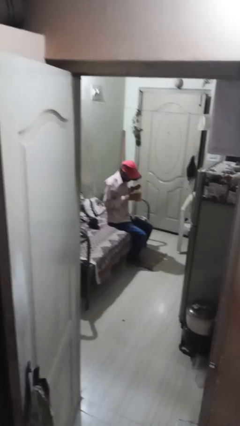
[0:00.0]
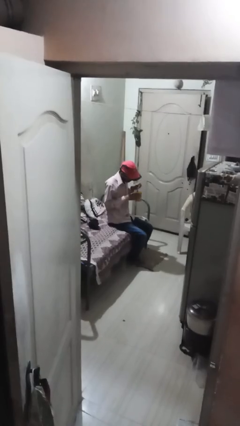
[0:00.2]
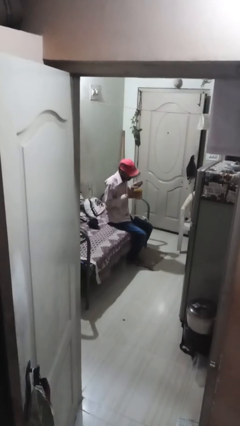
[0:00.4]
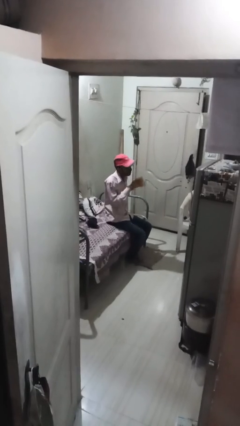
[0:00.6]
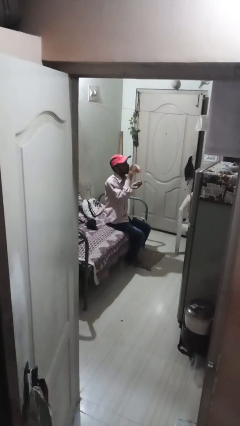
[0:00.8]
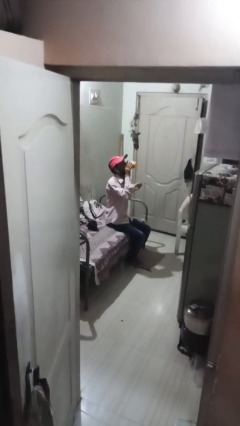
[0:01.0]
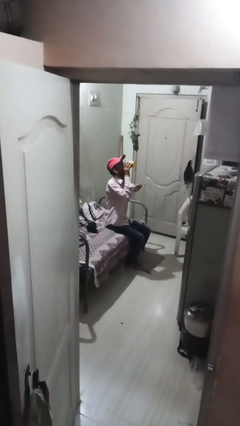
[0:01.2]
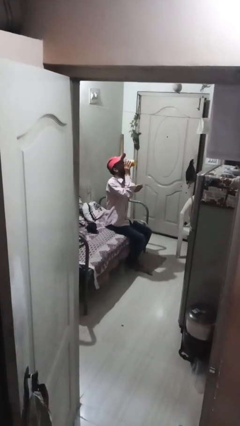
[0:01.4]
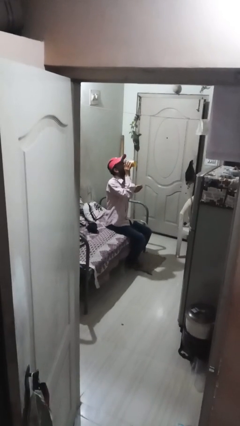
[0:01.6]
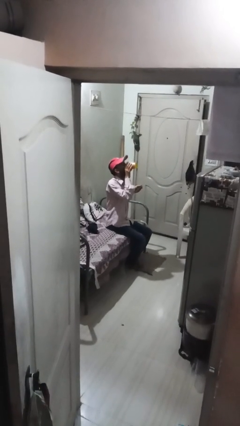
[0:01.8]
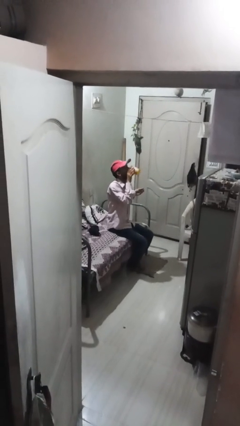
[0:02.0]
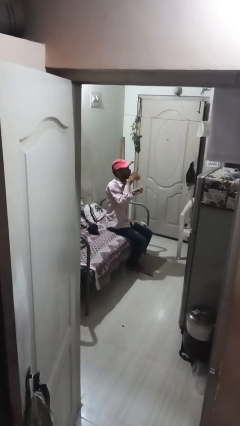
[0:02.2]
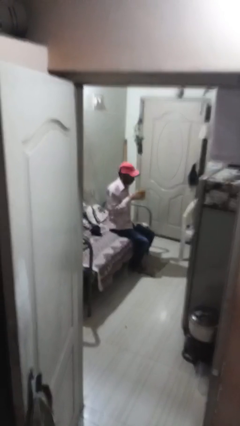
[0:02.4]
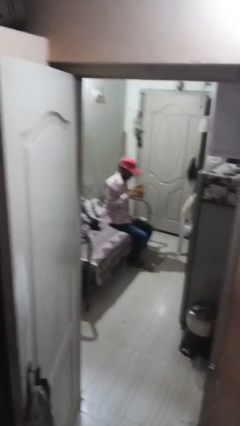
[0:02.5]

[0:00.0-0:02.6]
person drinks from mug

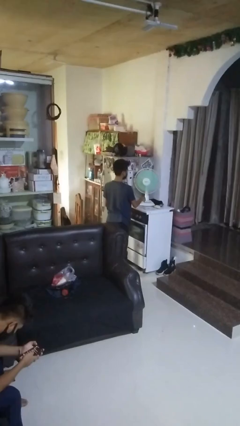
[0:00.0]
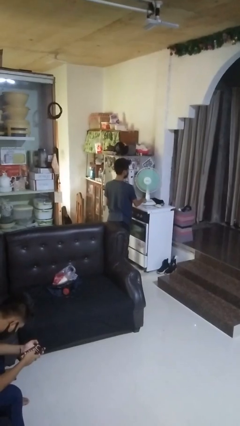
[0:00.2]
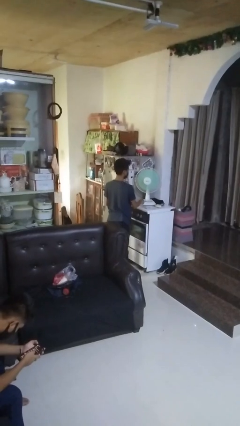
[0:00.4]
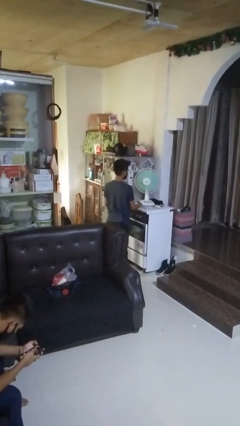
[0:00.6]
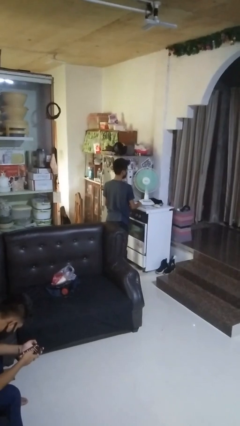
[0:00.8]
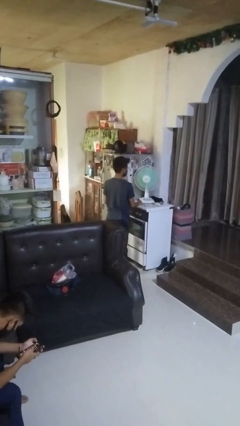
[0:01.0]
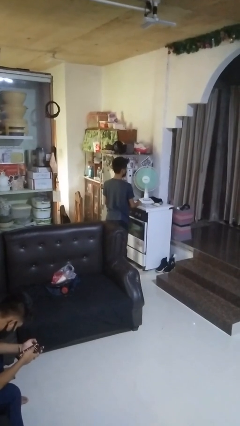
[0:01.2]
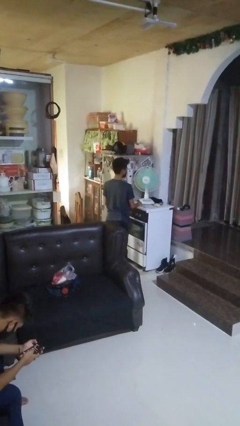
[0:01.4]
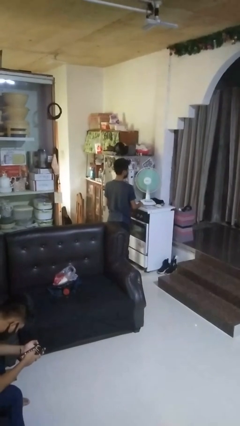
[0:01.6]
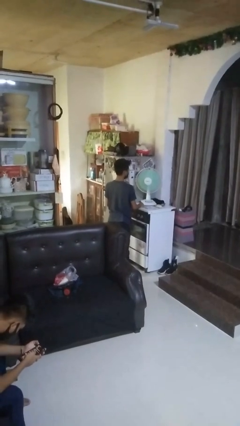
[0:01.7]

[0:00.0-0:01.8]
person turns off fan

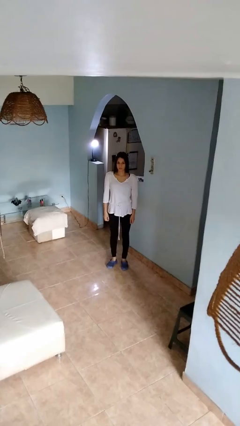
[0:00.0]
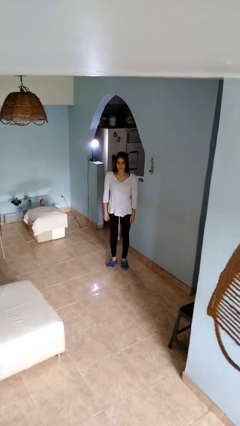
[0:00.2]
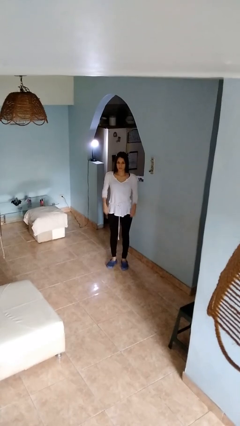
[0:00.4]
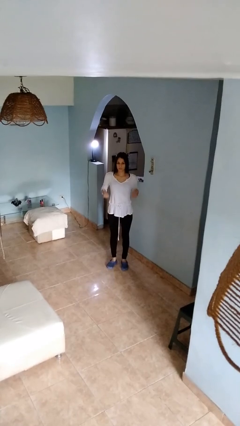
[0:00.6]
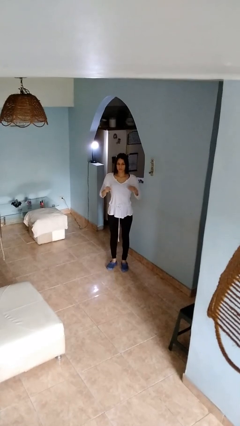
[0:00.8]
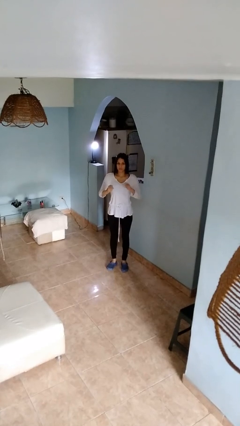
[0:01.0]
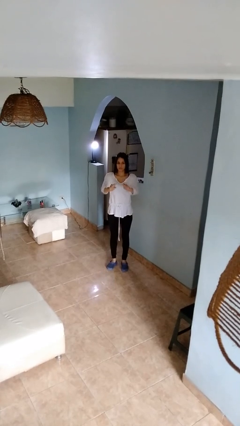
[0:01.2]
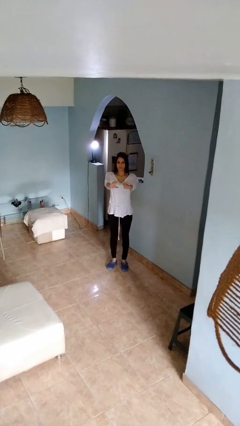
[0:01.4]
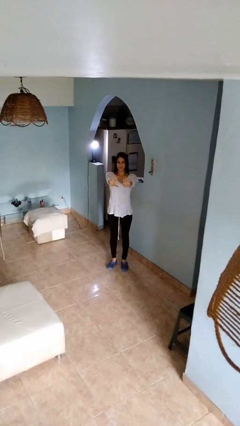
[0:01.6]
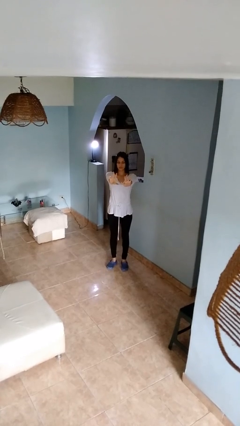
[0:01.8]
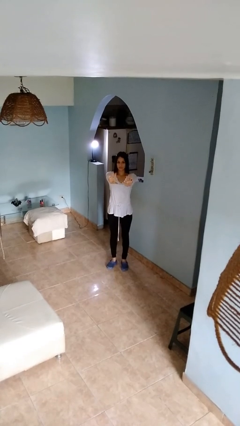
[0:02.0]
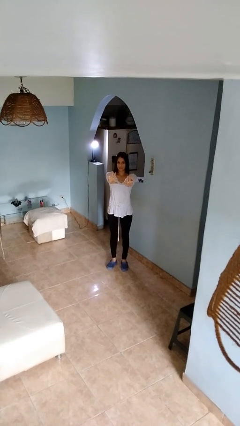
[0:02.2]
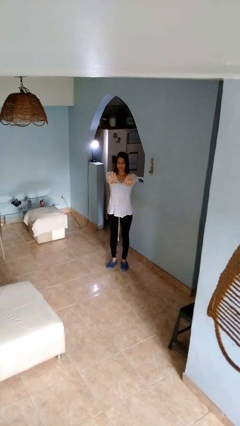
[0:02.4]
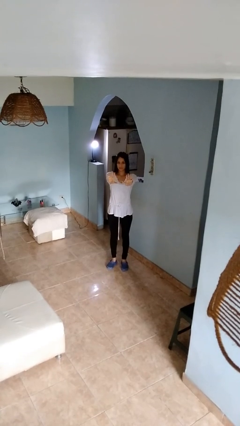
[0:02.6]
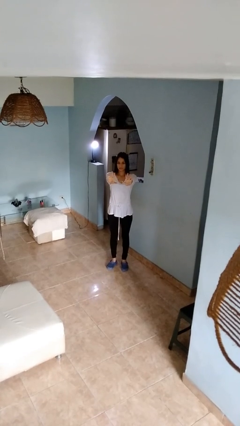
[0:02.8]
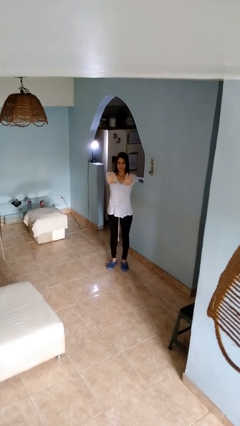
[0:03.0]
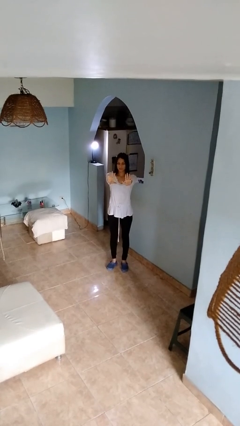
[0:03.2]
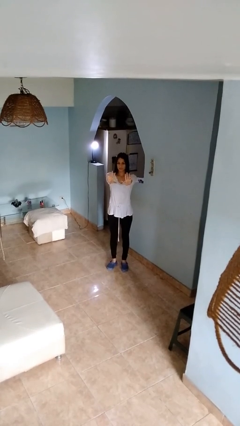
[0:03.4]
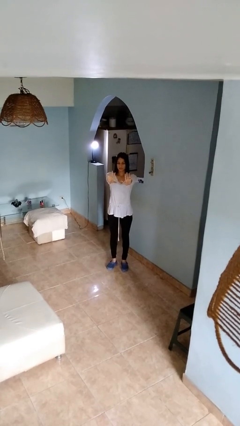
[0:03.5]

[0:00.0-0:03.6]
person gestures zoom in

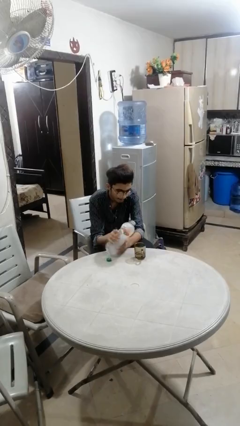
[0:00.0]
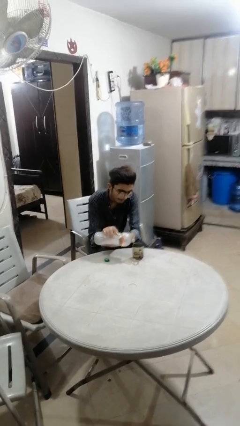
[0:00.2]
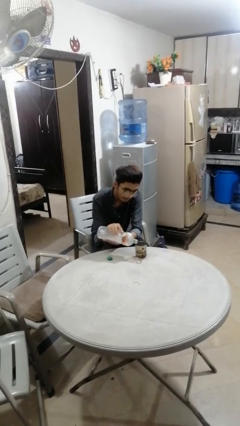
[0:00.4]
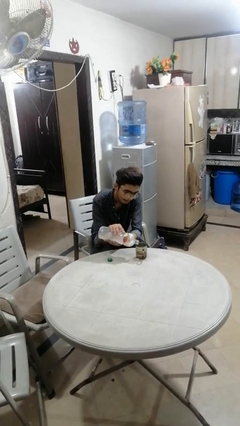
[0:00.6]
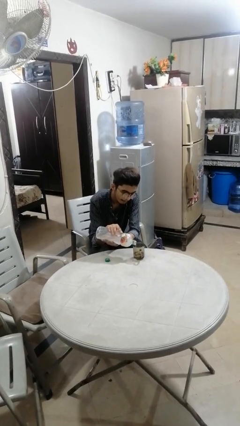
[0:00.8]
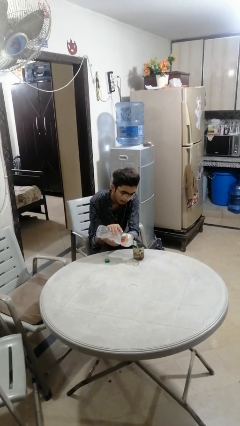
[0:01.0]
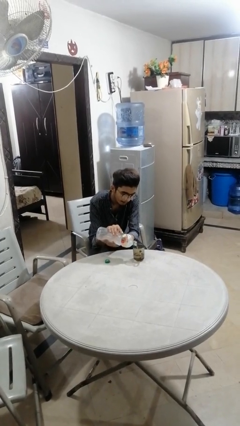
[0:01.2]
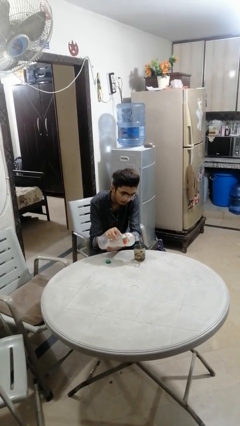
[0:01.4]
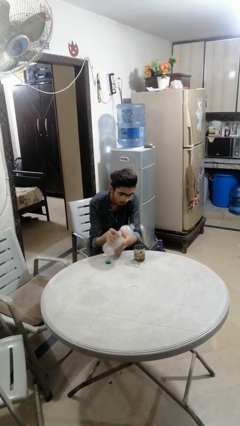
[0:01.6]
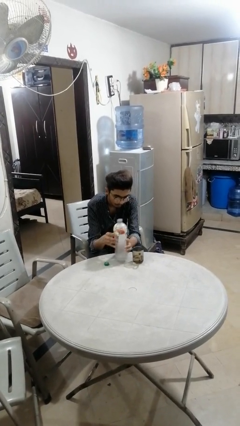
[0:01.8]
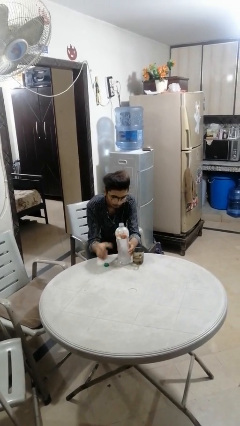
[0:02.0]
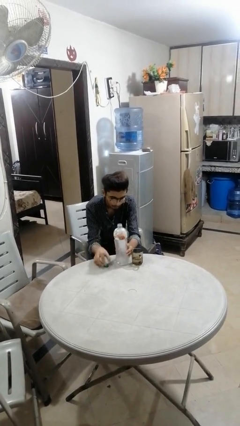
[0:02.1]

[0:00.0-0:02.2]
person pours liquid into cup

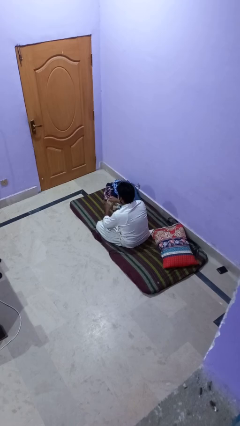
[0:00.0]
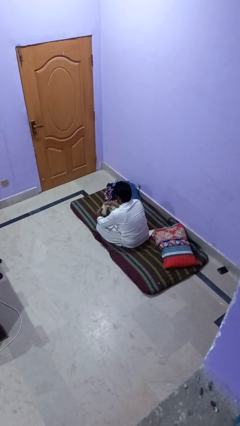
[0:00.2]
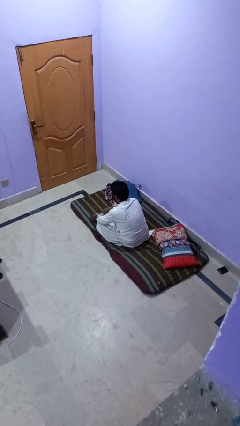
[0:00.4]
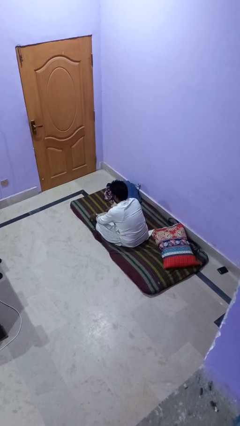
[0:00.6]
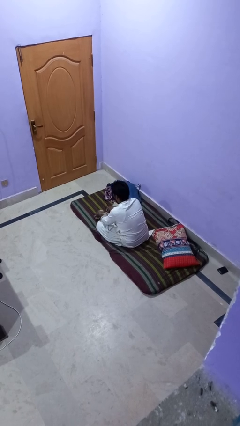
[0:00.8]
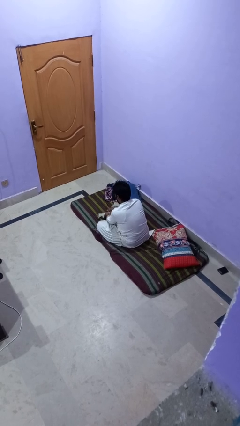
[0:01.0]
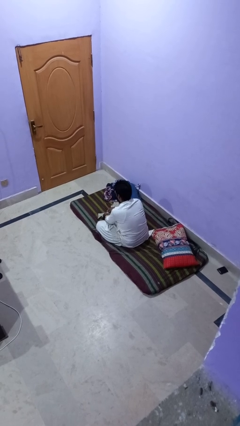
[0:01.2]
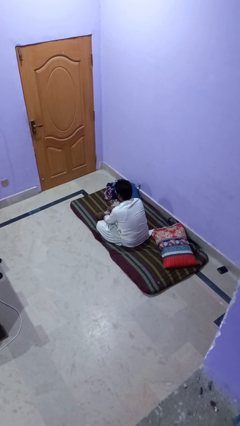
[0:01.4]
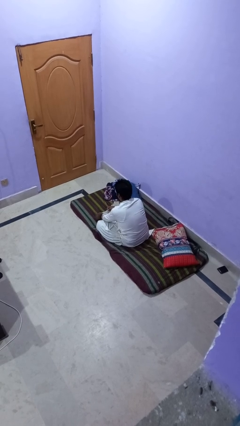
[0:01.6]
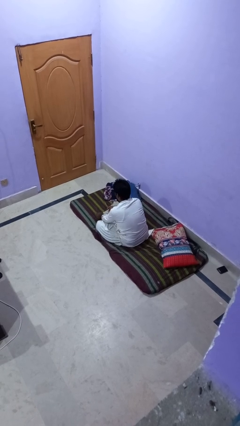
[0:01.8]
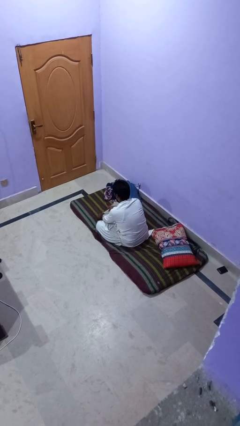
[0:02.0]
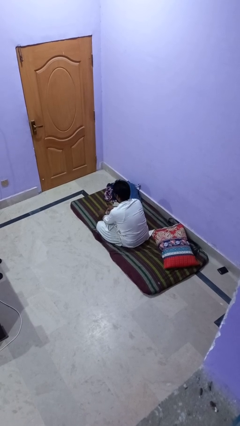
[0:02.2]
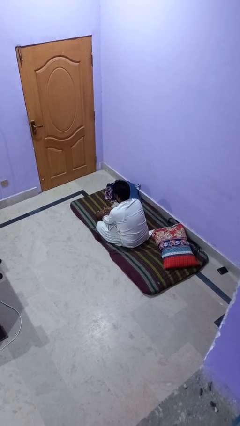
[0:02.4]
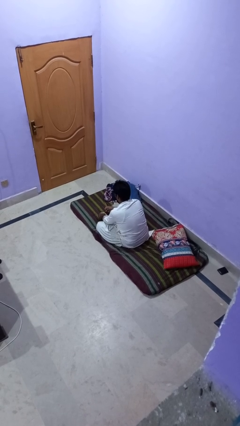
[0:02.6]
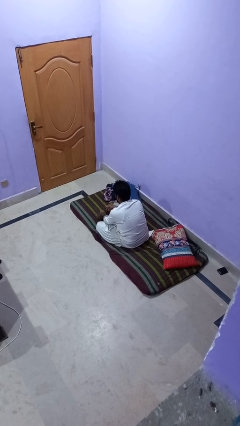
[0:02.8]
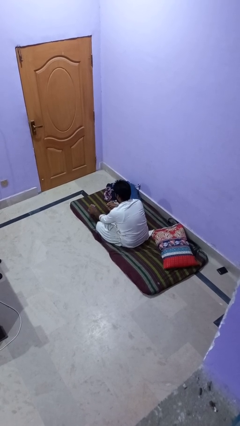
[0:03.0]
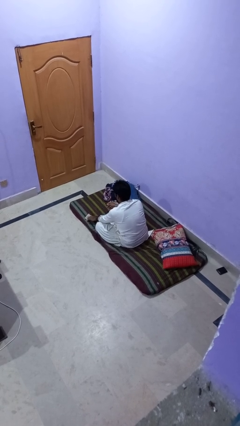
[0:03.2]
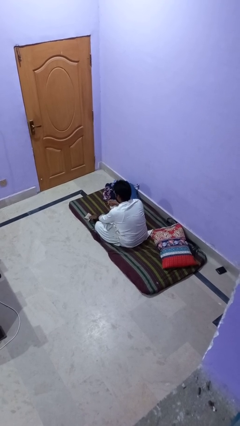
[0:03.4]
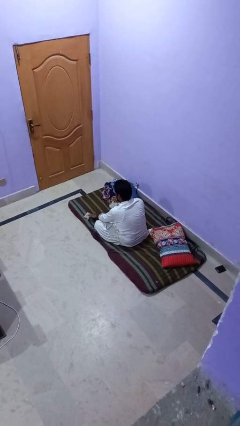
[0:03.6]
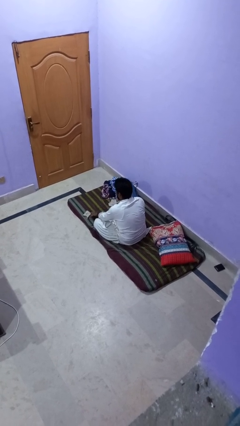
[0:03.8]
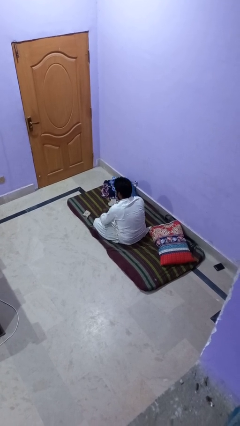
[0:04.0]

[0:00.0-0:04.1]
person folds socks

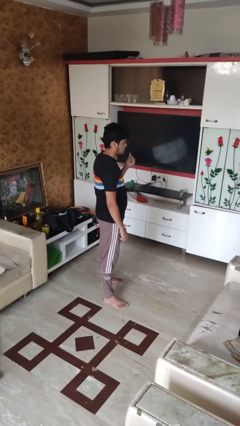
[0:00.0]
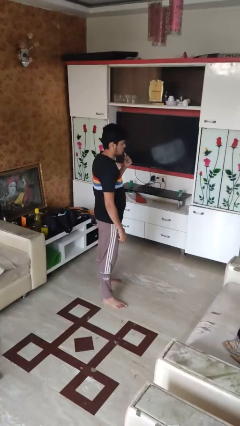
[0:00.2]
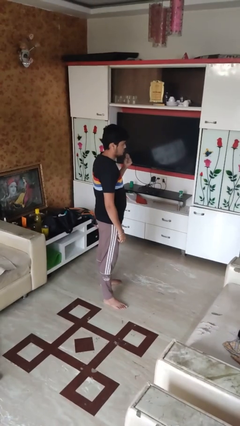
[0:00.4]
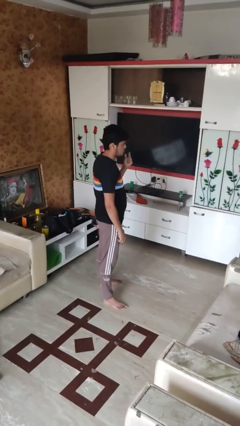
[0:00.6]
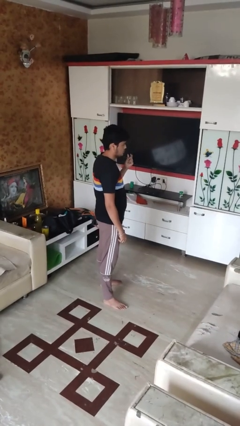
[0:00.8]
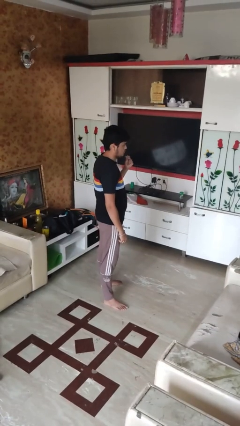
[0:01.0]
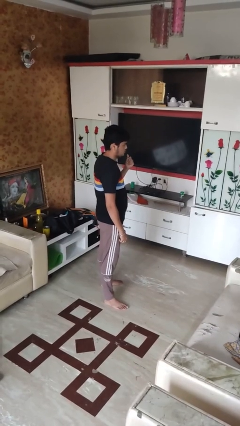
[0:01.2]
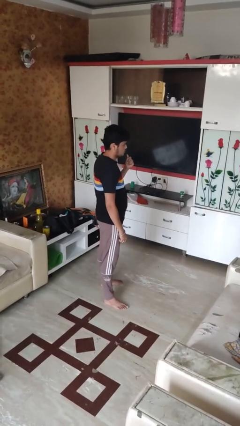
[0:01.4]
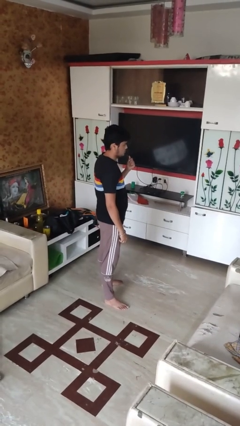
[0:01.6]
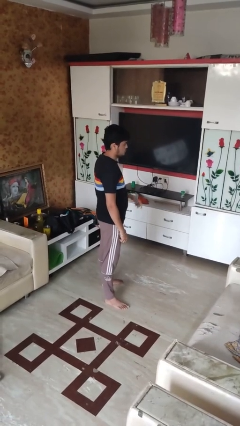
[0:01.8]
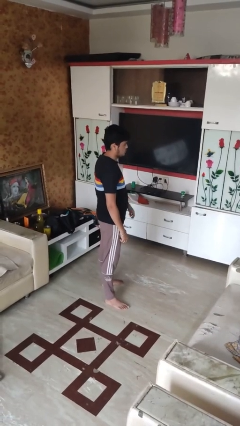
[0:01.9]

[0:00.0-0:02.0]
person snaps fingers

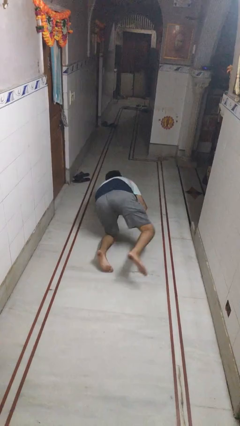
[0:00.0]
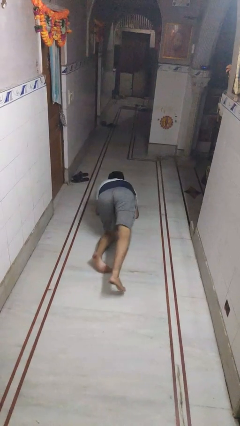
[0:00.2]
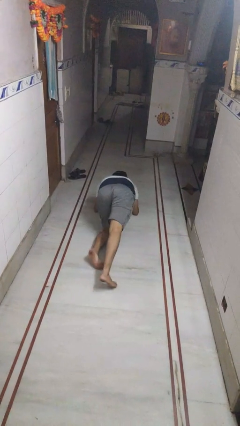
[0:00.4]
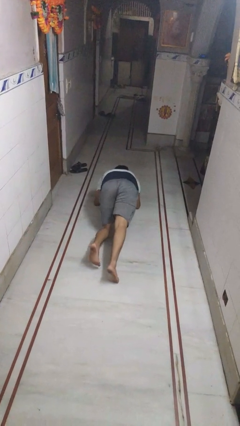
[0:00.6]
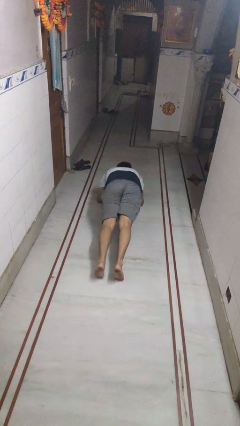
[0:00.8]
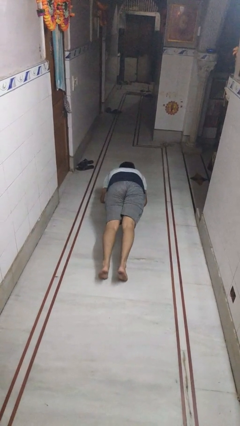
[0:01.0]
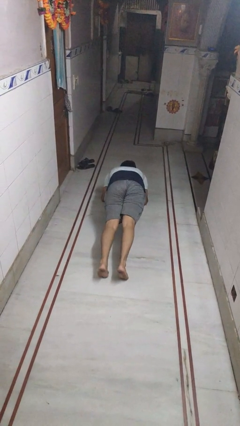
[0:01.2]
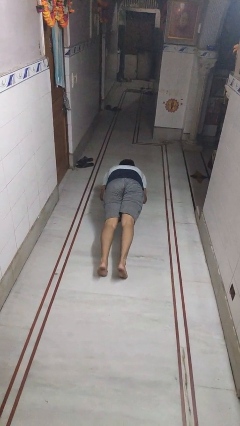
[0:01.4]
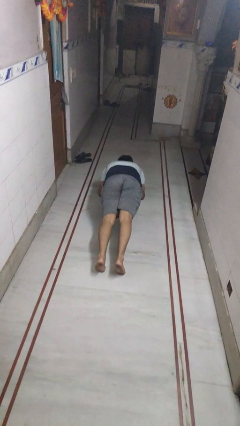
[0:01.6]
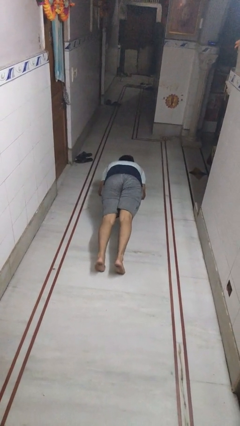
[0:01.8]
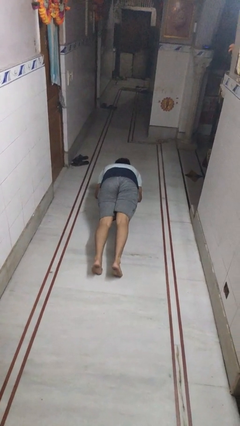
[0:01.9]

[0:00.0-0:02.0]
person exercises with plank
